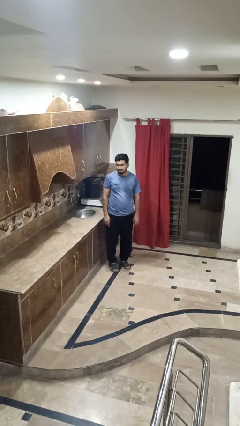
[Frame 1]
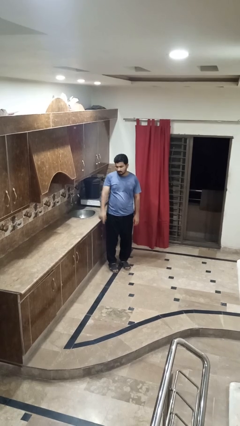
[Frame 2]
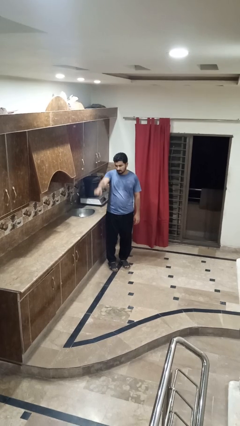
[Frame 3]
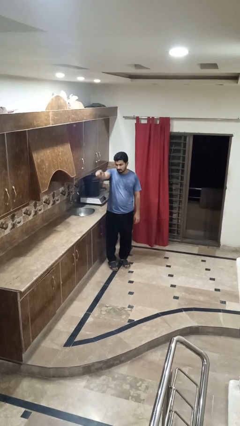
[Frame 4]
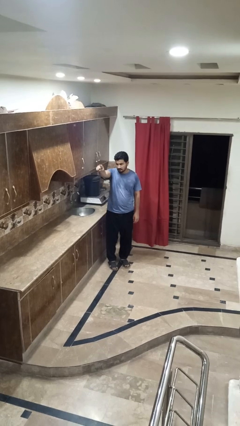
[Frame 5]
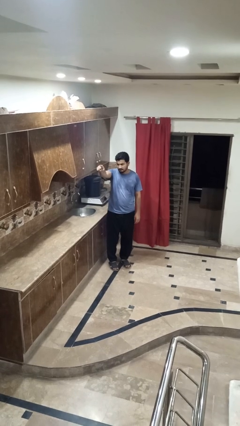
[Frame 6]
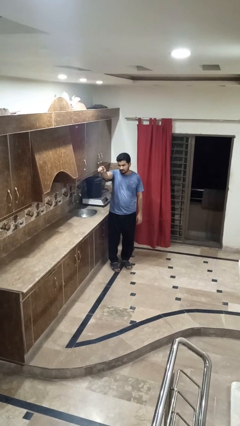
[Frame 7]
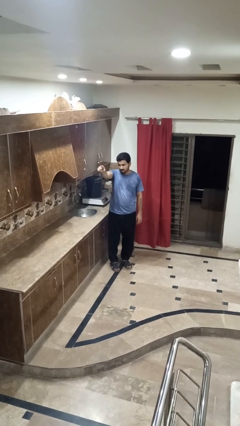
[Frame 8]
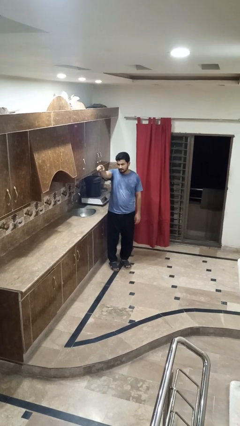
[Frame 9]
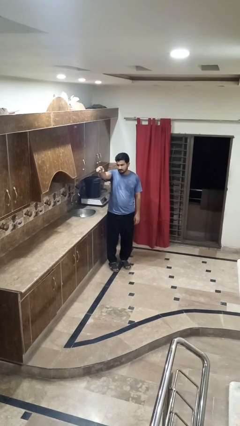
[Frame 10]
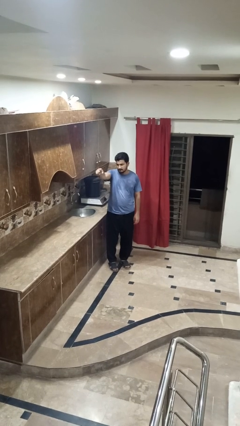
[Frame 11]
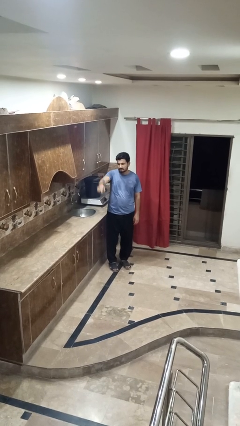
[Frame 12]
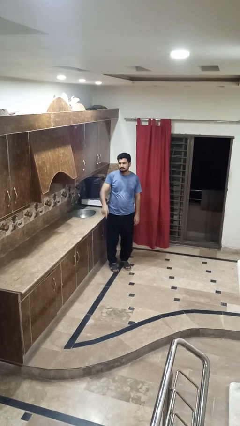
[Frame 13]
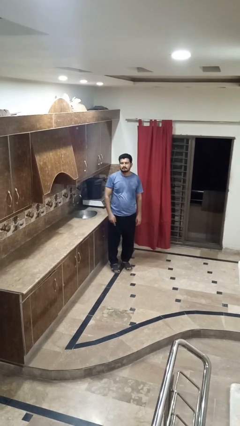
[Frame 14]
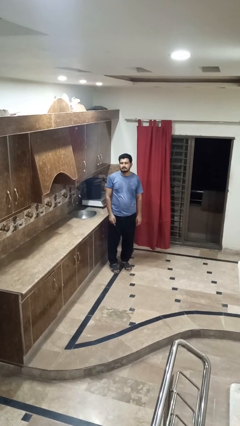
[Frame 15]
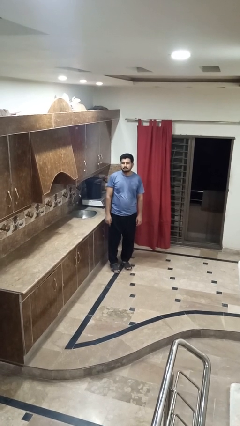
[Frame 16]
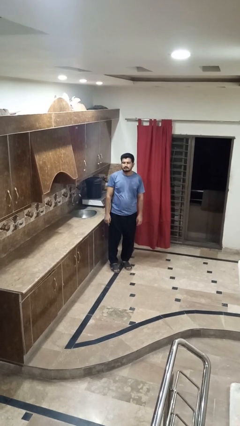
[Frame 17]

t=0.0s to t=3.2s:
person points at person

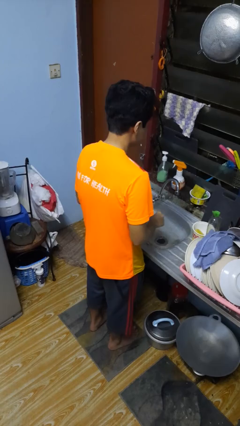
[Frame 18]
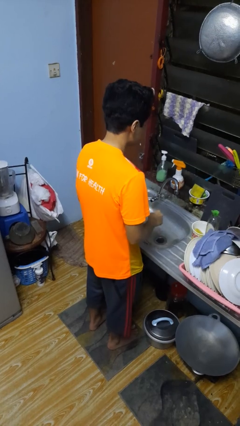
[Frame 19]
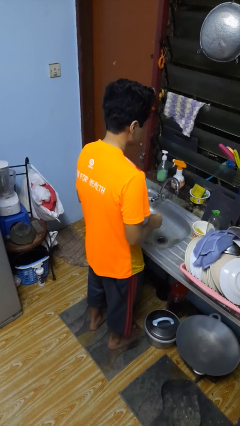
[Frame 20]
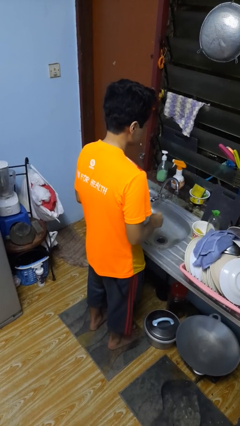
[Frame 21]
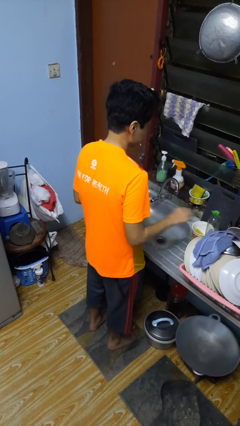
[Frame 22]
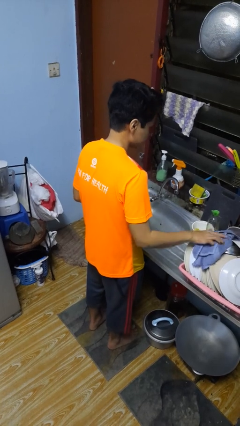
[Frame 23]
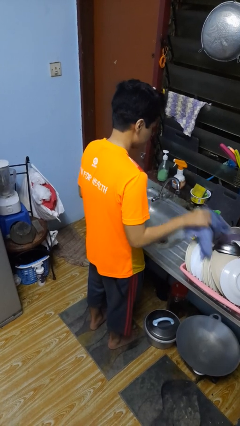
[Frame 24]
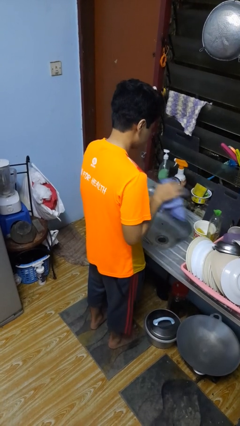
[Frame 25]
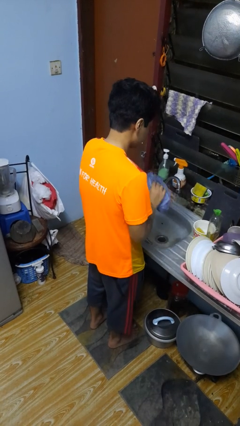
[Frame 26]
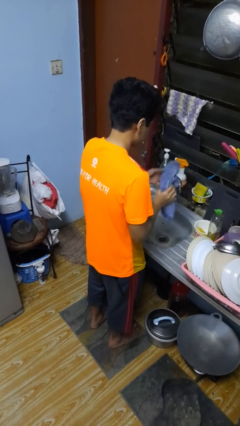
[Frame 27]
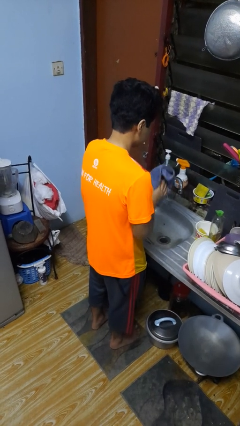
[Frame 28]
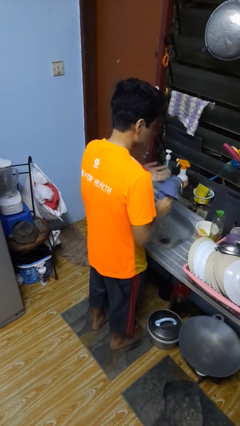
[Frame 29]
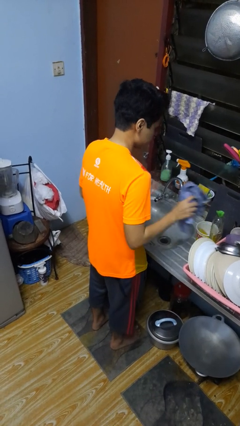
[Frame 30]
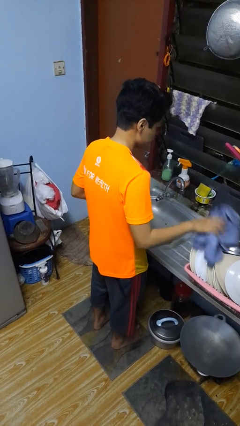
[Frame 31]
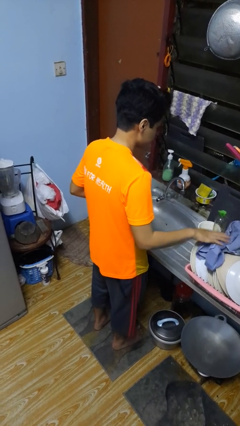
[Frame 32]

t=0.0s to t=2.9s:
person dries hands with towel

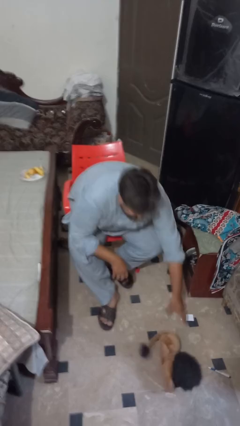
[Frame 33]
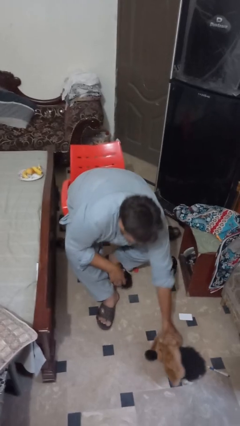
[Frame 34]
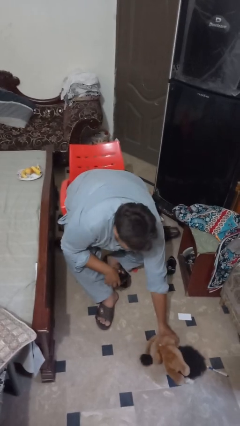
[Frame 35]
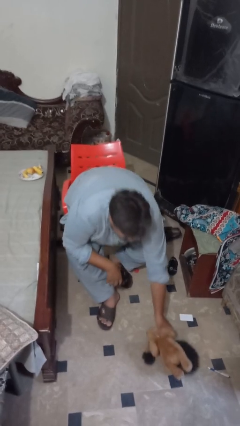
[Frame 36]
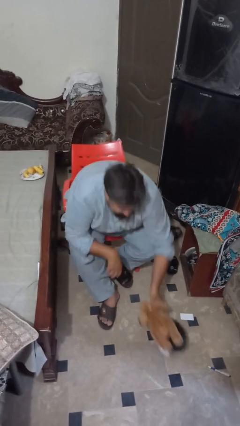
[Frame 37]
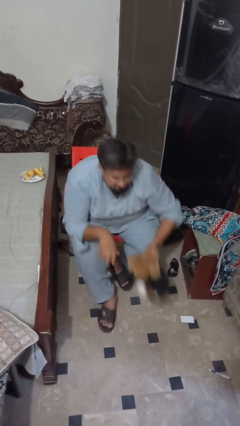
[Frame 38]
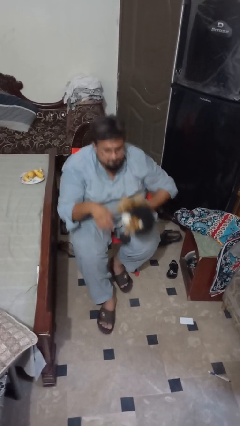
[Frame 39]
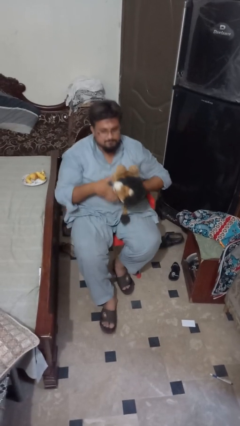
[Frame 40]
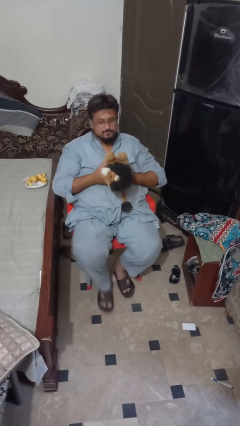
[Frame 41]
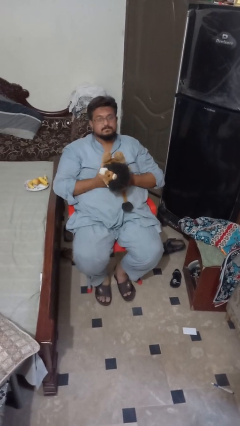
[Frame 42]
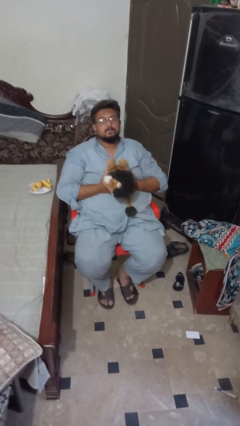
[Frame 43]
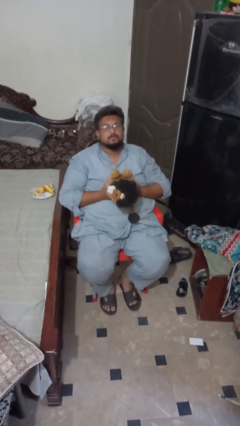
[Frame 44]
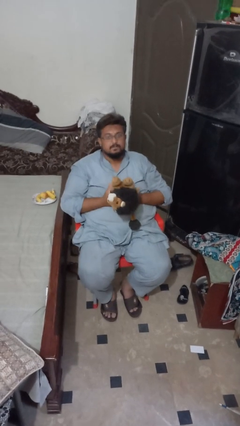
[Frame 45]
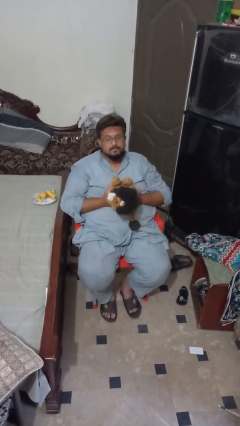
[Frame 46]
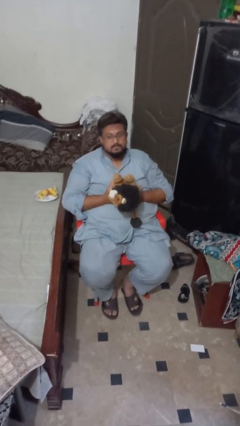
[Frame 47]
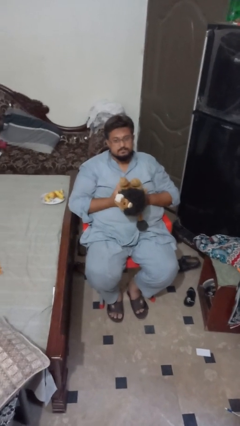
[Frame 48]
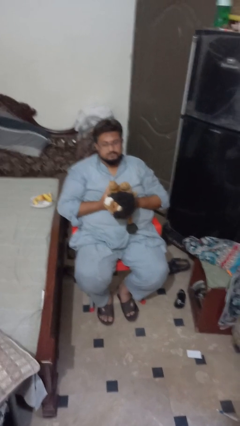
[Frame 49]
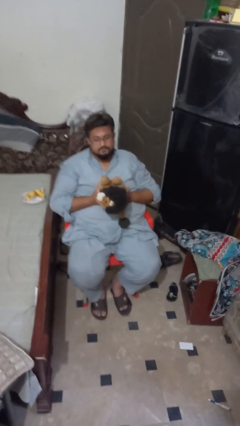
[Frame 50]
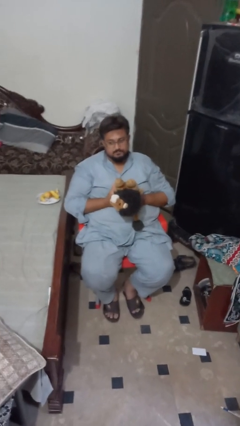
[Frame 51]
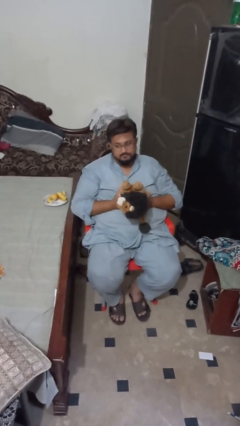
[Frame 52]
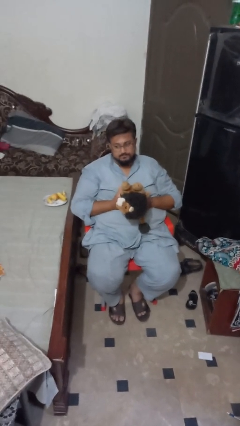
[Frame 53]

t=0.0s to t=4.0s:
person picks up object from floor

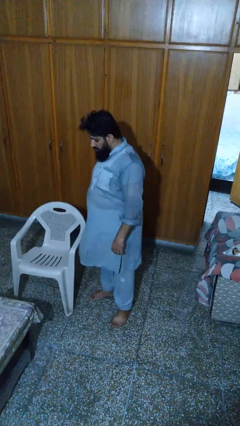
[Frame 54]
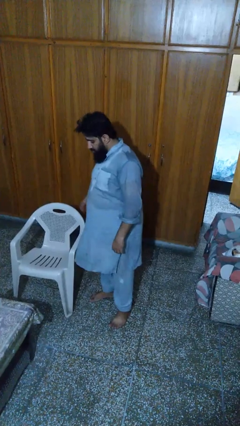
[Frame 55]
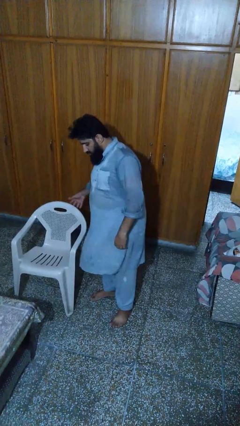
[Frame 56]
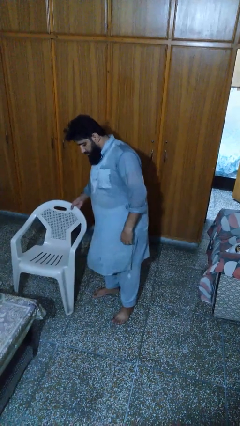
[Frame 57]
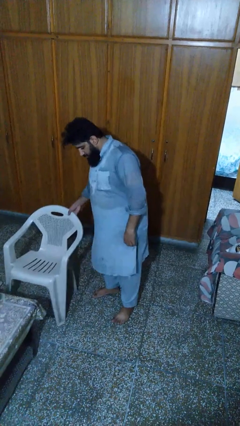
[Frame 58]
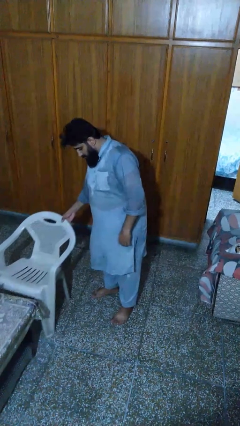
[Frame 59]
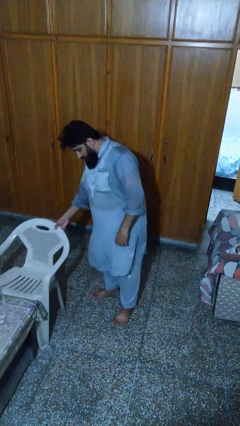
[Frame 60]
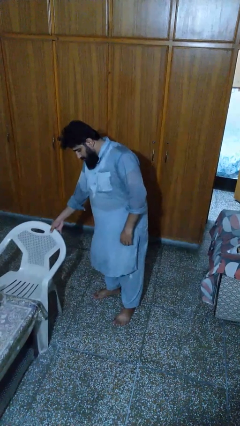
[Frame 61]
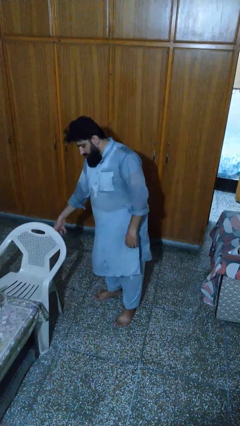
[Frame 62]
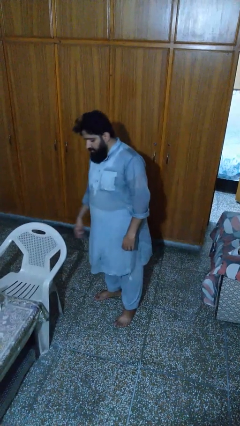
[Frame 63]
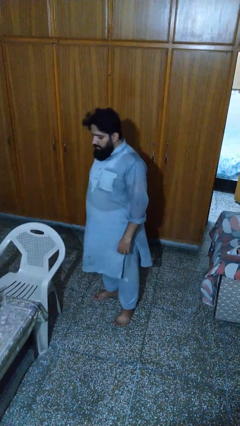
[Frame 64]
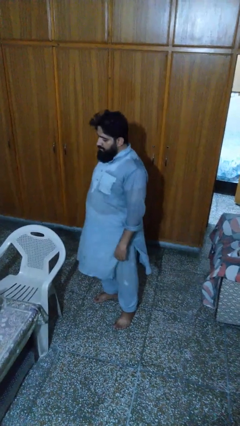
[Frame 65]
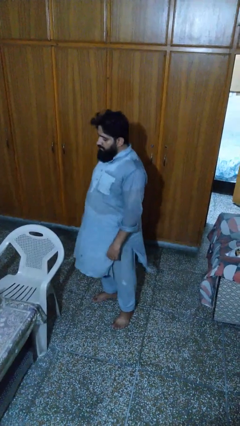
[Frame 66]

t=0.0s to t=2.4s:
person pushes in chair

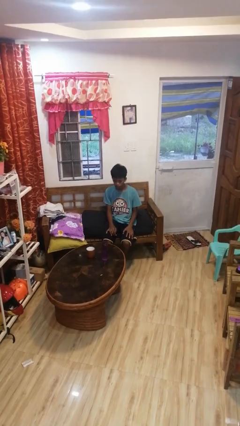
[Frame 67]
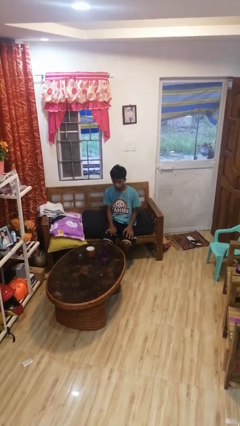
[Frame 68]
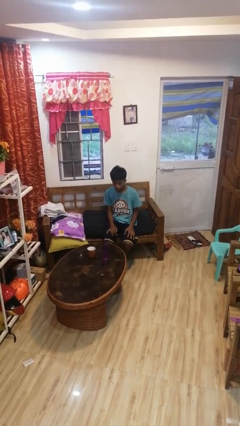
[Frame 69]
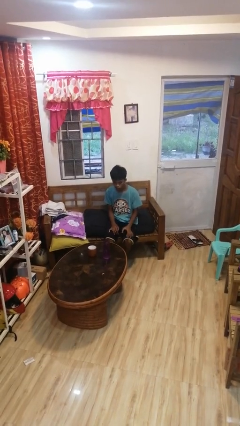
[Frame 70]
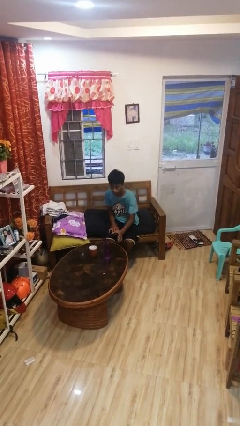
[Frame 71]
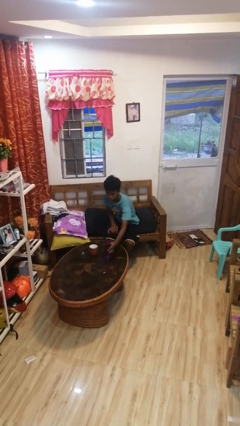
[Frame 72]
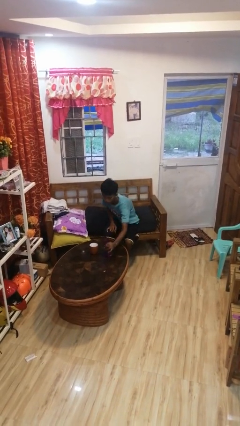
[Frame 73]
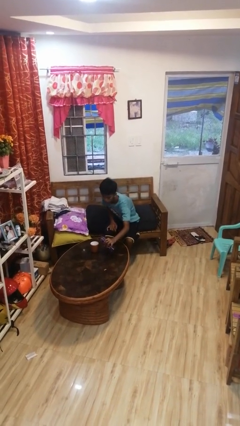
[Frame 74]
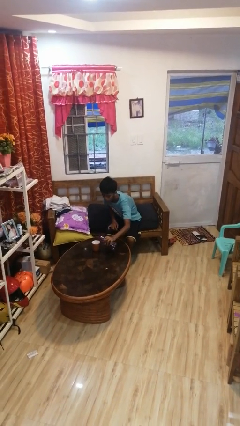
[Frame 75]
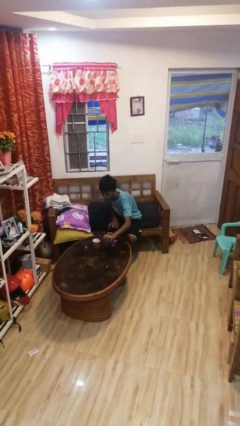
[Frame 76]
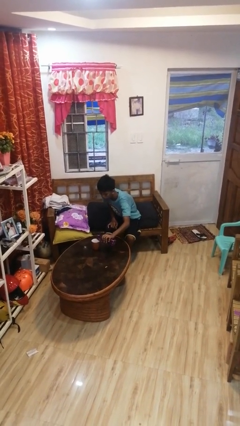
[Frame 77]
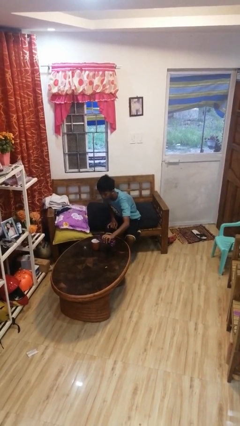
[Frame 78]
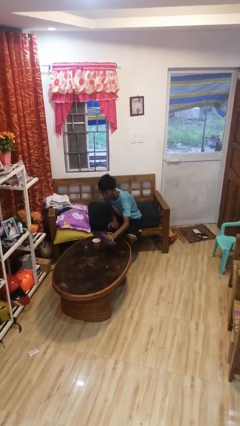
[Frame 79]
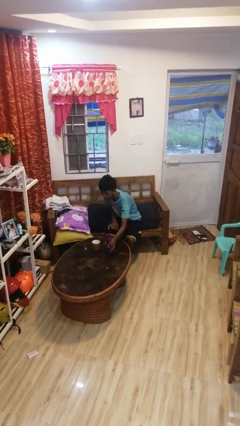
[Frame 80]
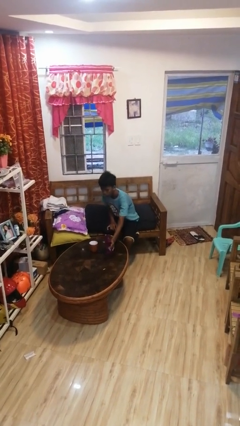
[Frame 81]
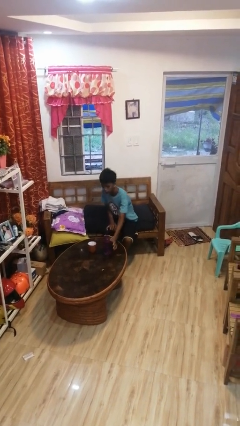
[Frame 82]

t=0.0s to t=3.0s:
person pours liquid into cup

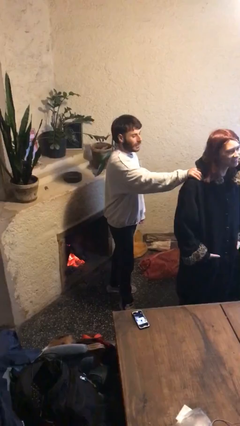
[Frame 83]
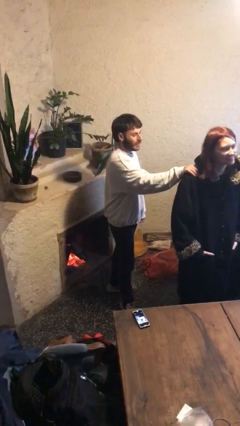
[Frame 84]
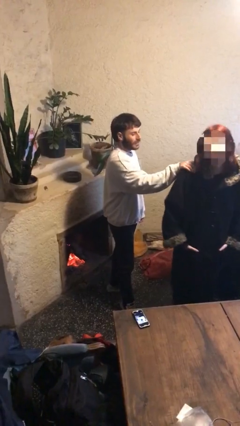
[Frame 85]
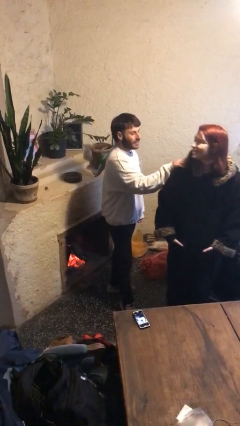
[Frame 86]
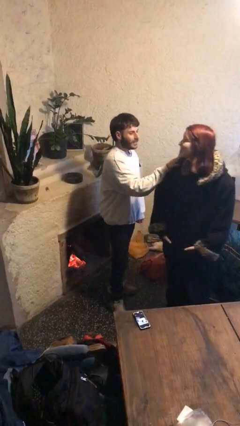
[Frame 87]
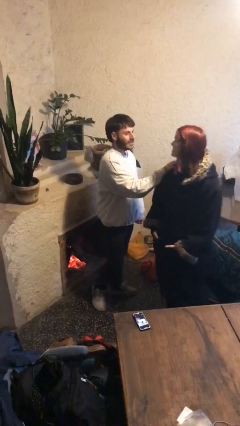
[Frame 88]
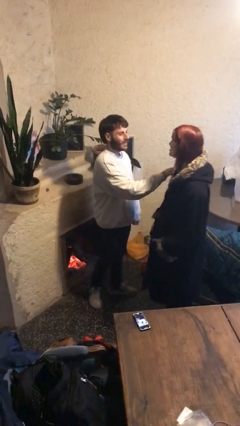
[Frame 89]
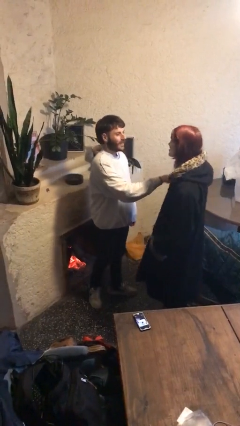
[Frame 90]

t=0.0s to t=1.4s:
person spins person around

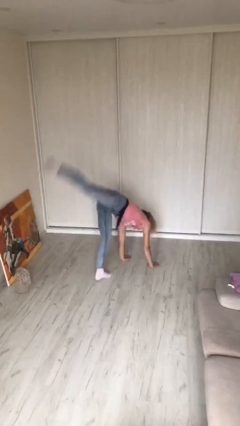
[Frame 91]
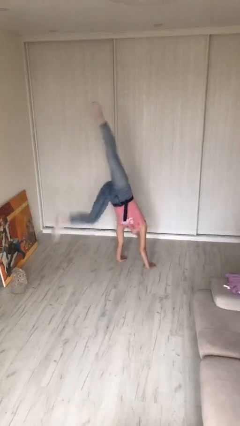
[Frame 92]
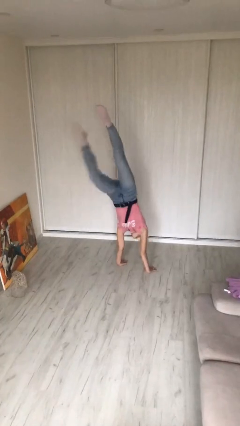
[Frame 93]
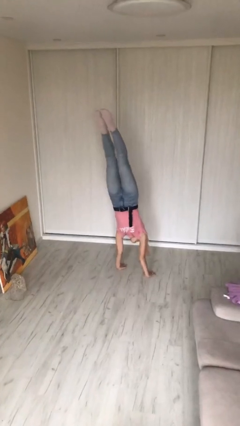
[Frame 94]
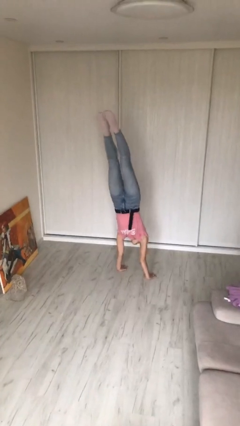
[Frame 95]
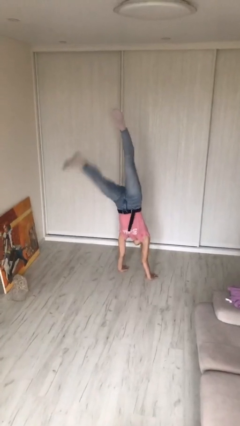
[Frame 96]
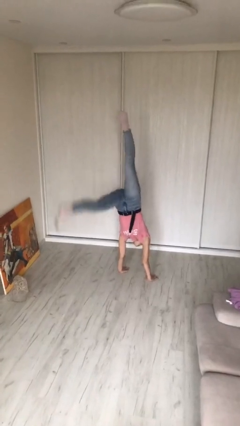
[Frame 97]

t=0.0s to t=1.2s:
person handstand
